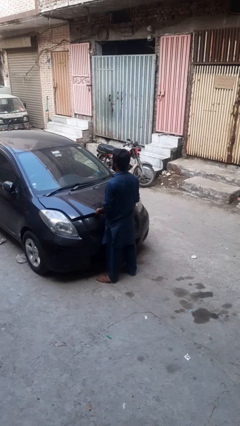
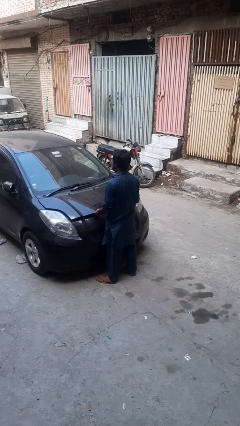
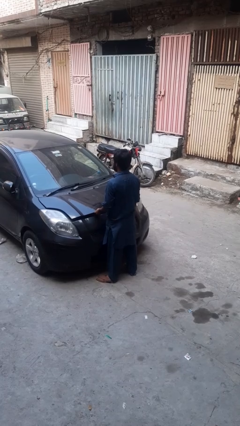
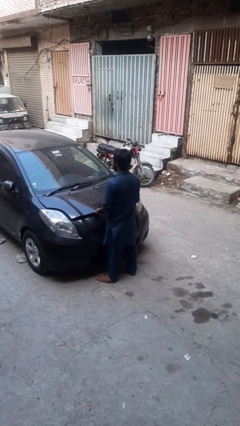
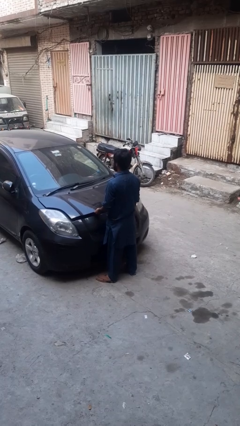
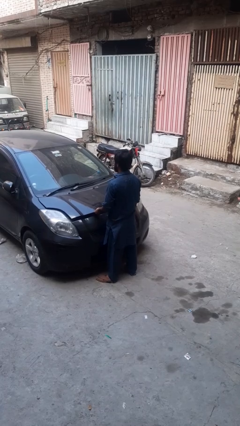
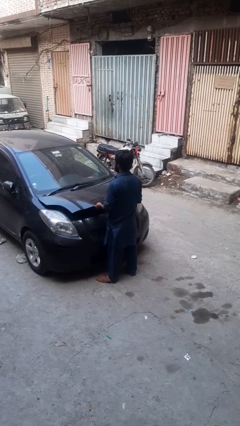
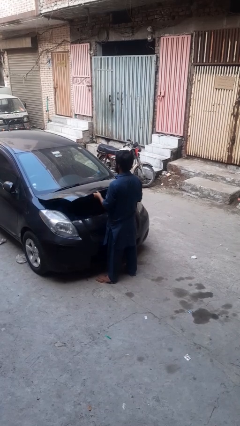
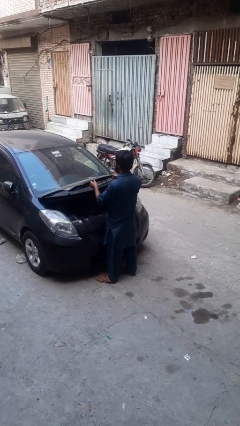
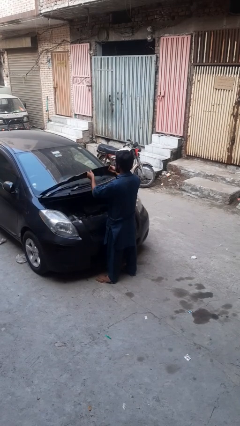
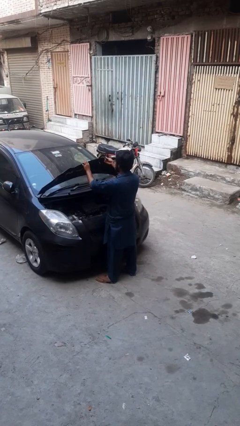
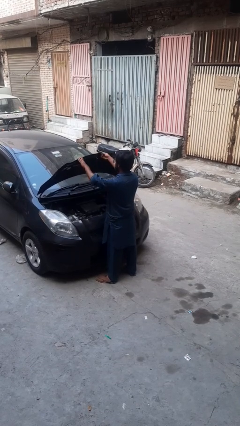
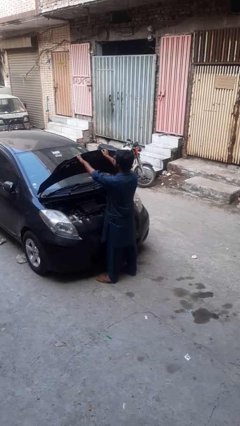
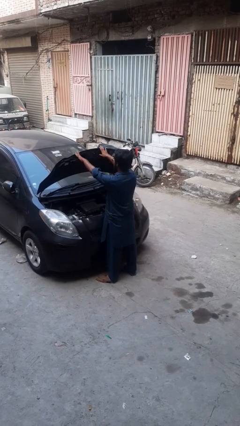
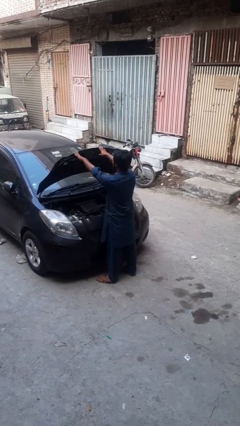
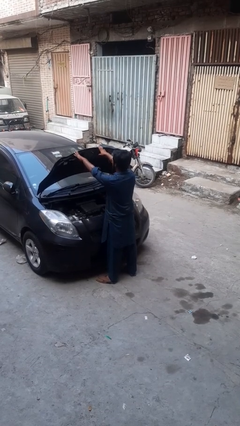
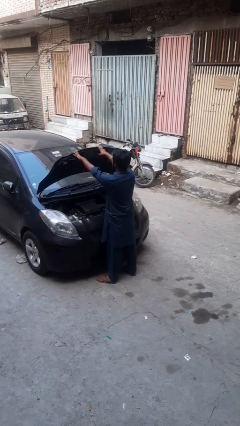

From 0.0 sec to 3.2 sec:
person opens car hood

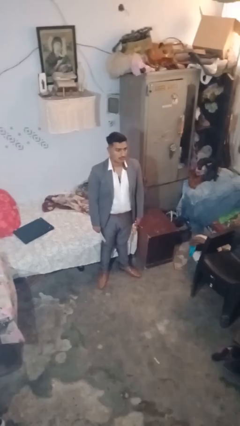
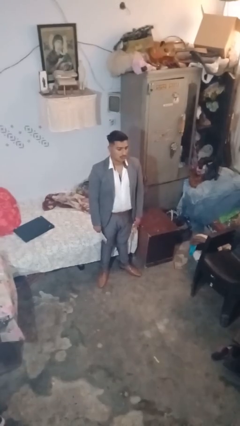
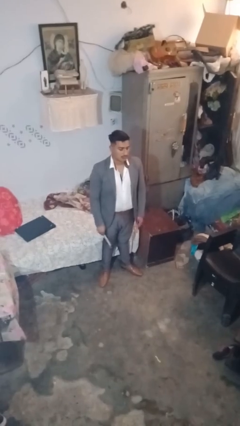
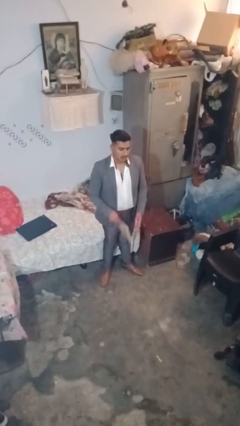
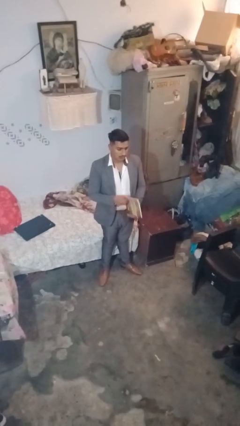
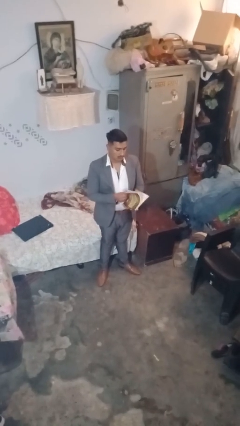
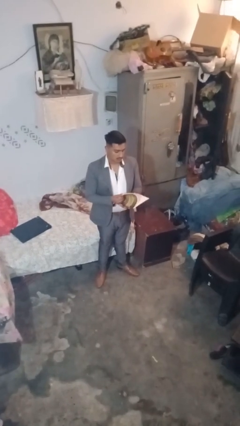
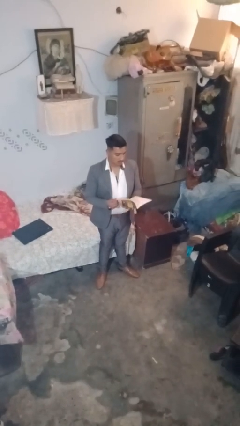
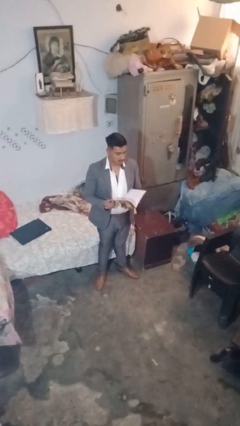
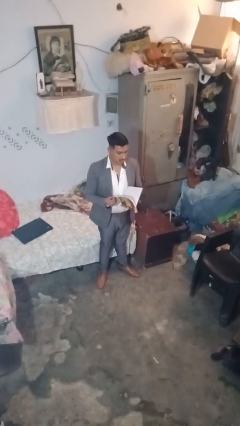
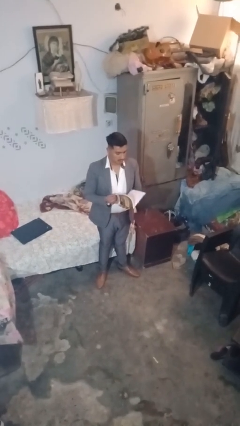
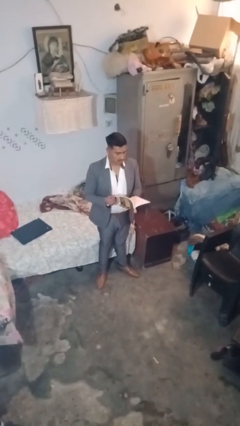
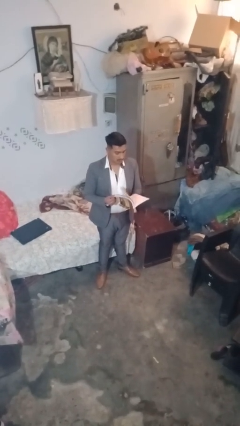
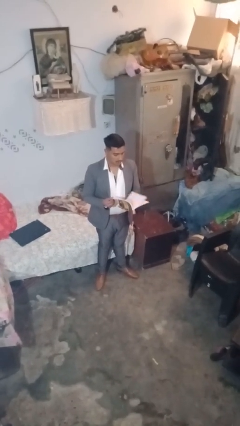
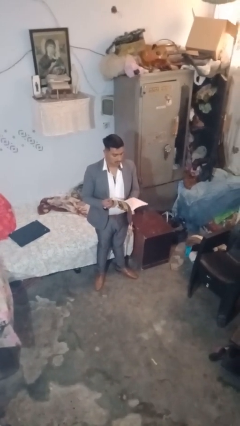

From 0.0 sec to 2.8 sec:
person reads document

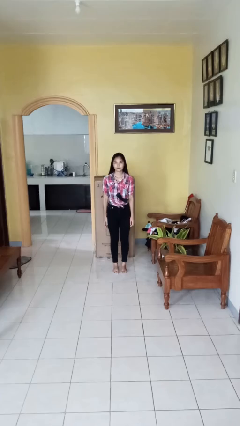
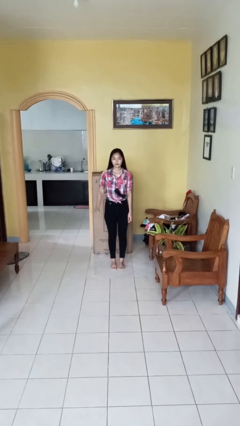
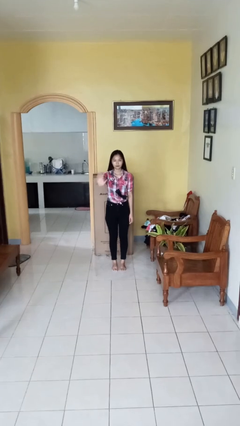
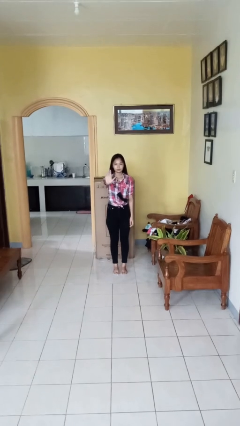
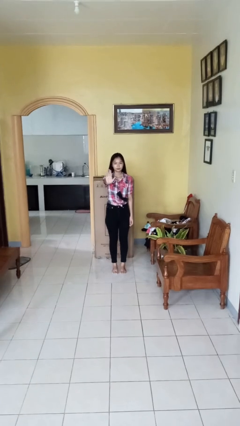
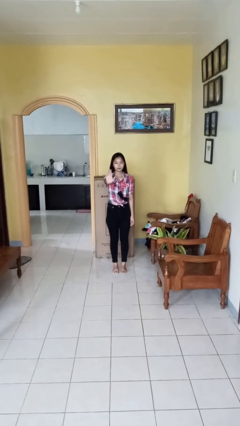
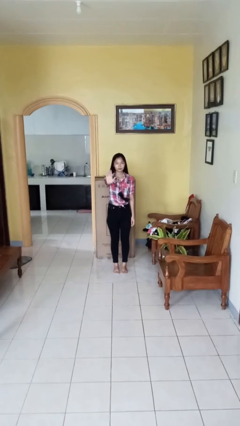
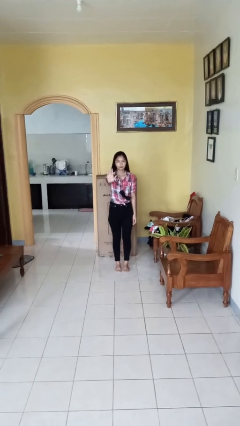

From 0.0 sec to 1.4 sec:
person gestures stop

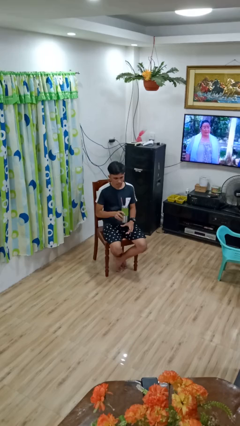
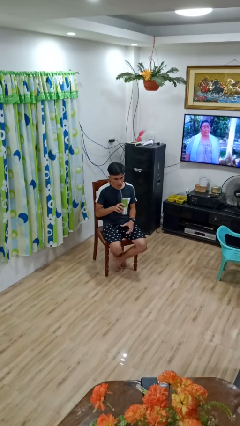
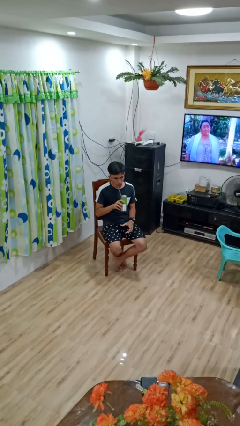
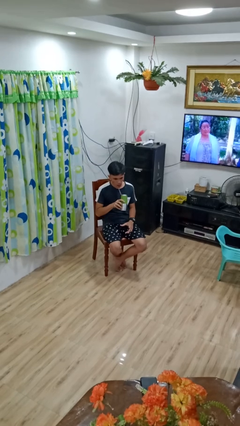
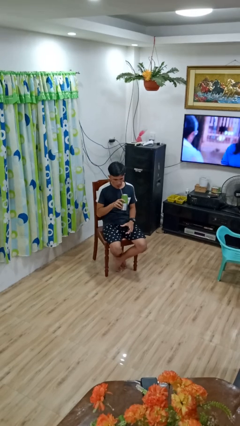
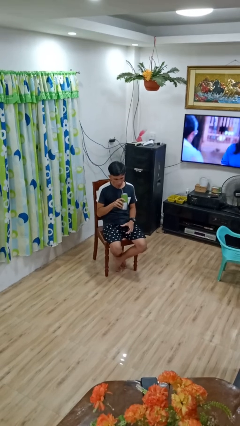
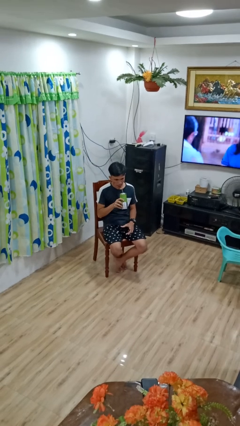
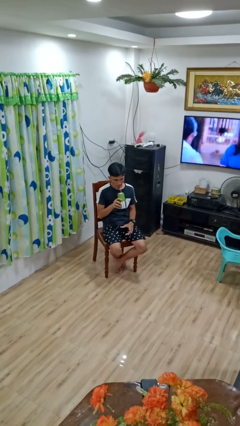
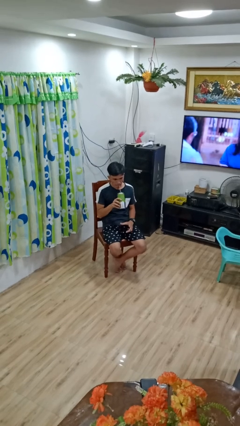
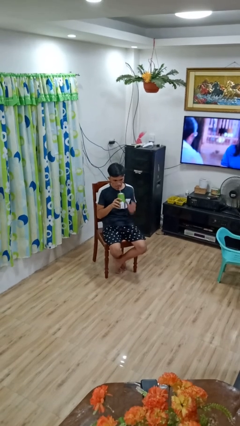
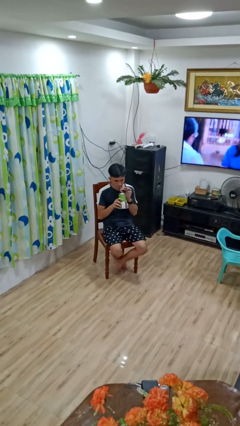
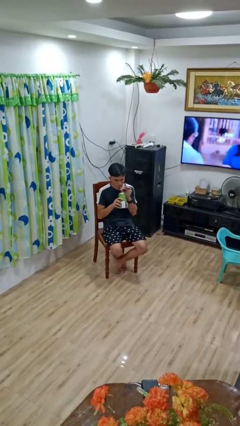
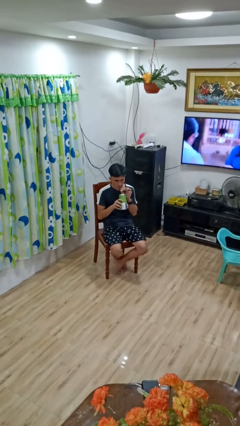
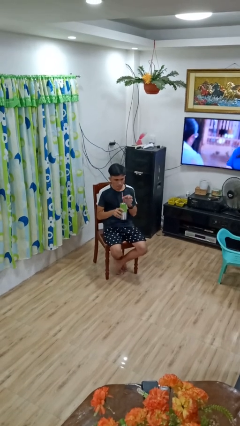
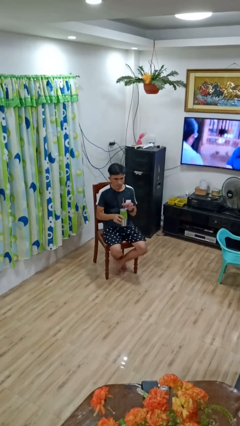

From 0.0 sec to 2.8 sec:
person drinks from straw

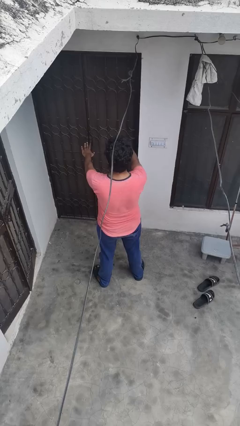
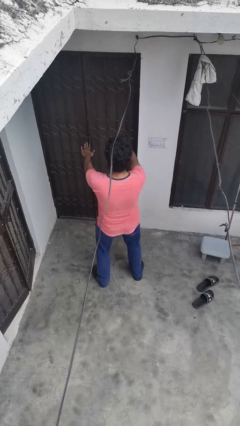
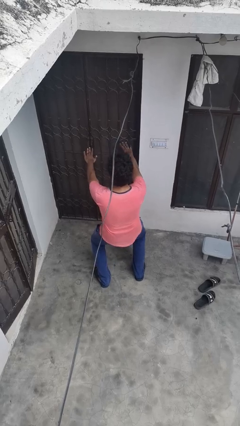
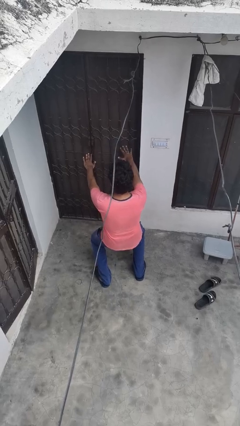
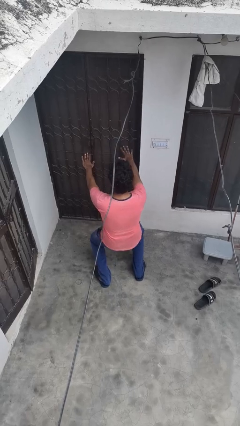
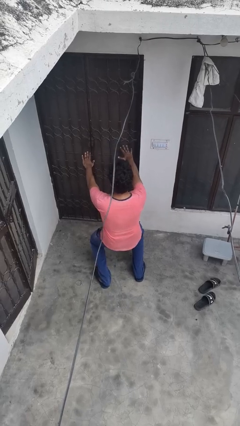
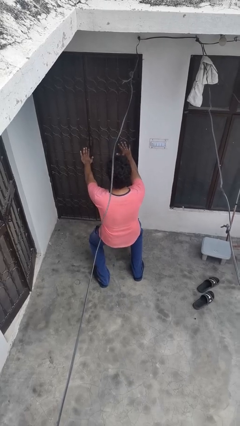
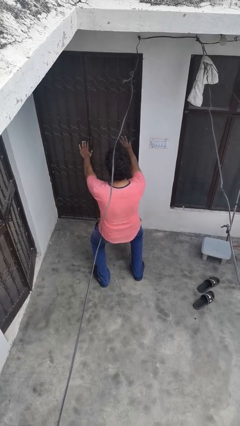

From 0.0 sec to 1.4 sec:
person squats

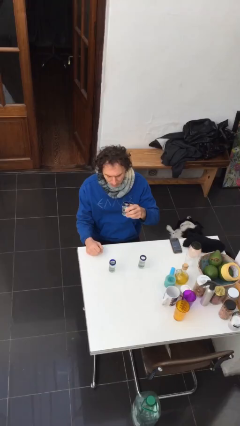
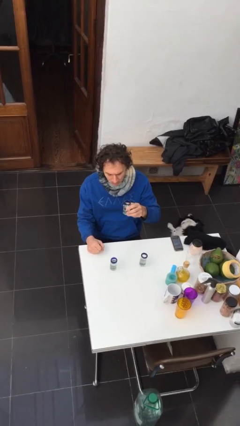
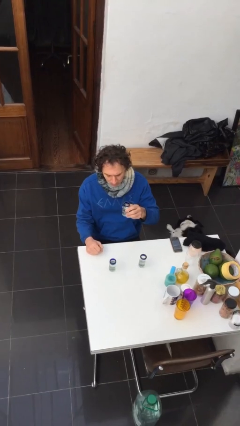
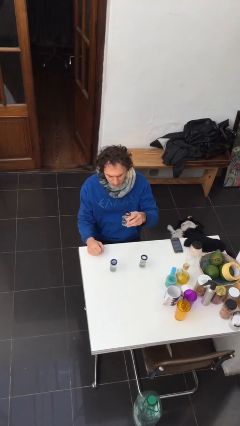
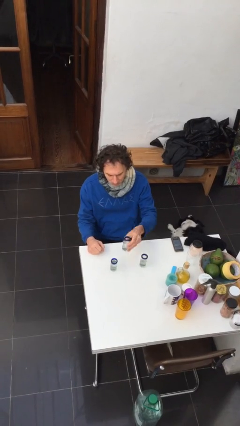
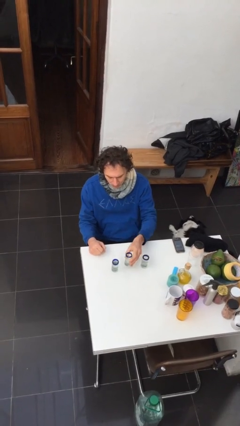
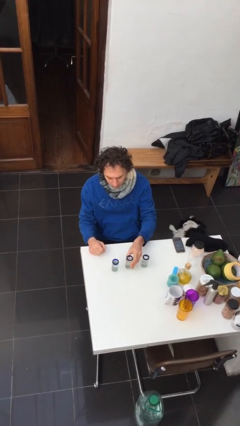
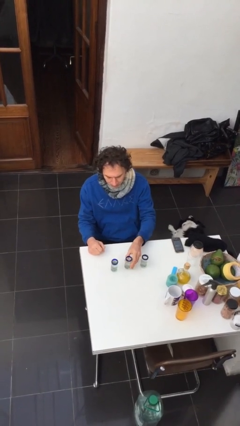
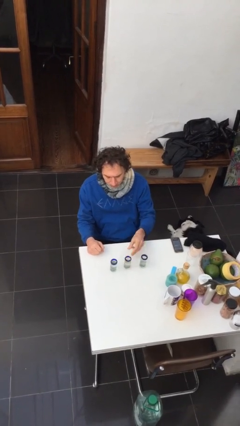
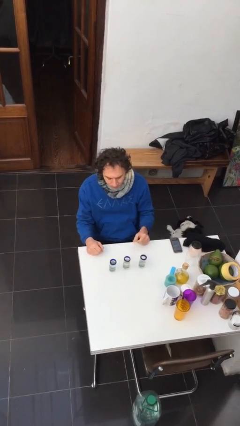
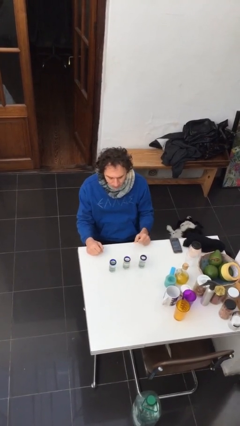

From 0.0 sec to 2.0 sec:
person puts down object on table

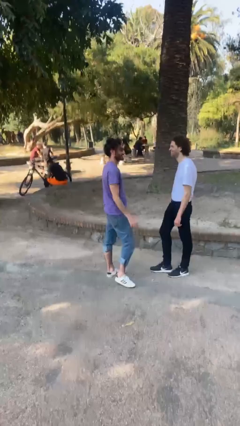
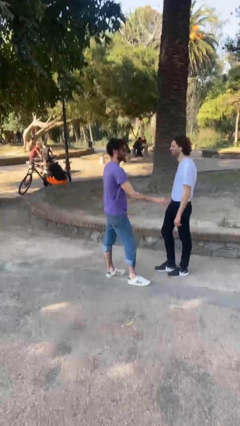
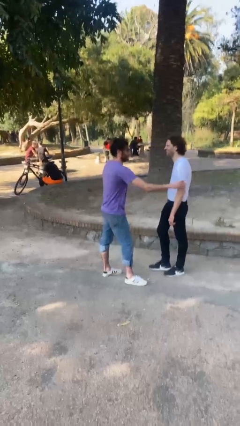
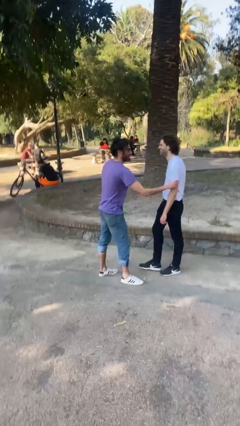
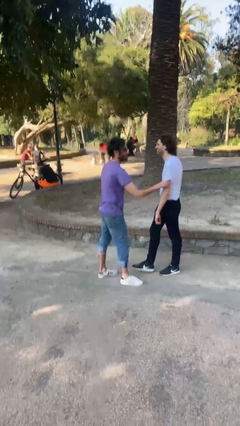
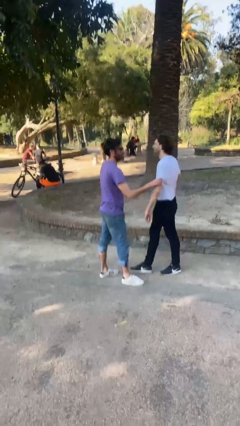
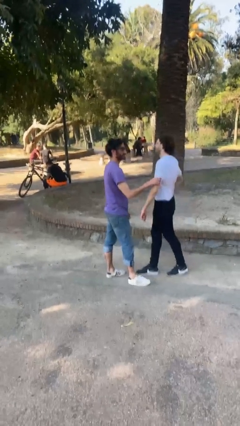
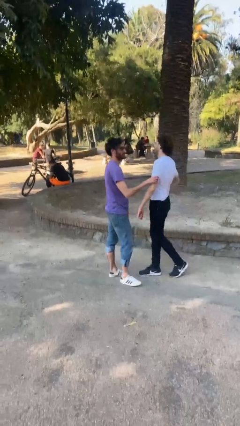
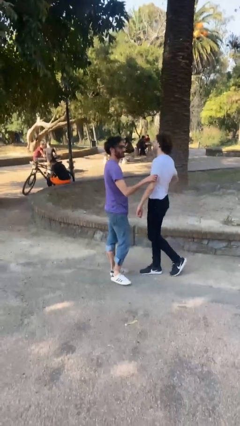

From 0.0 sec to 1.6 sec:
person grabs person by bicep

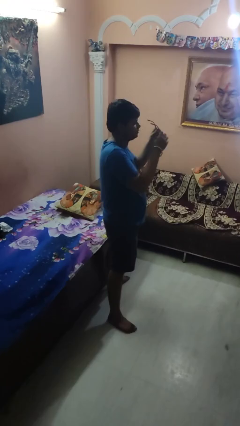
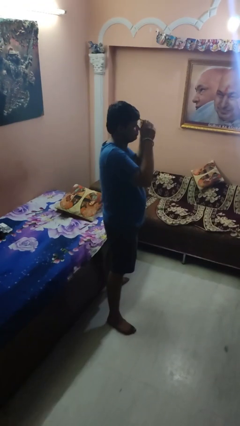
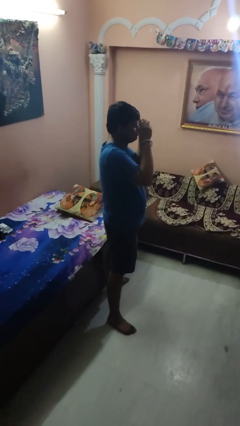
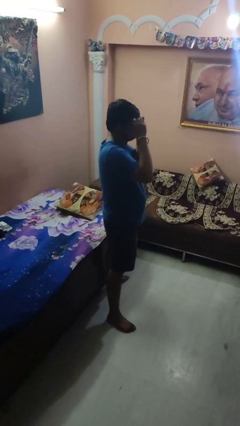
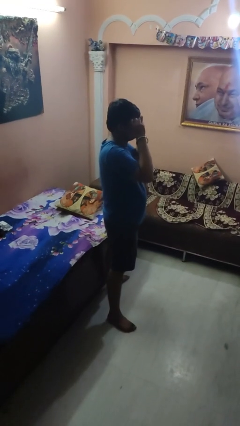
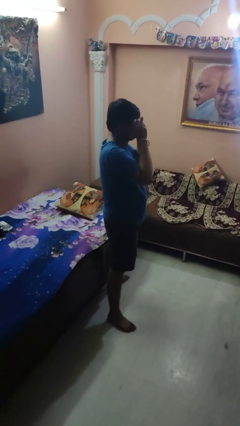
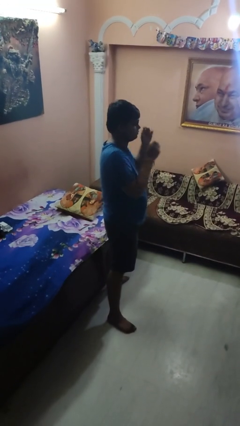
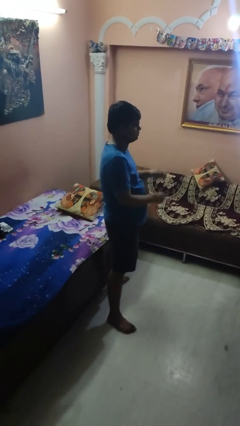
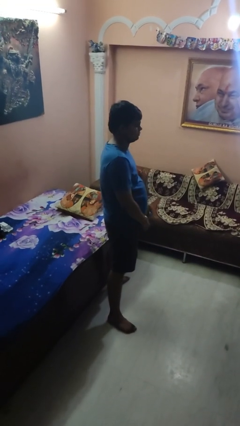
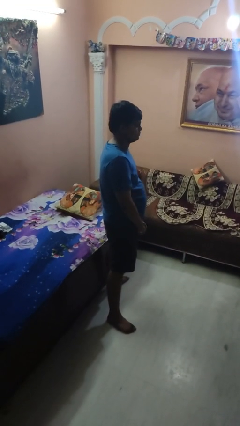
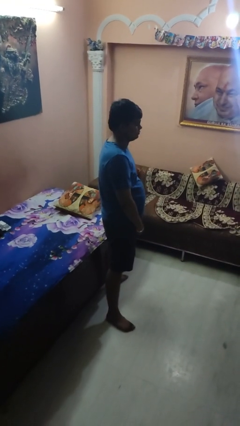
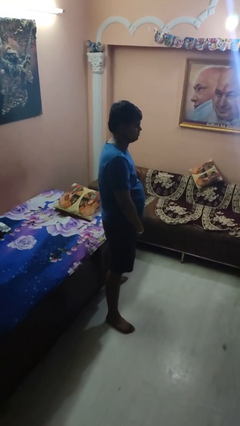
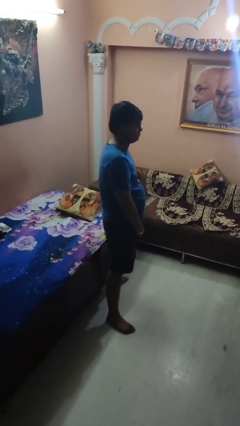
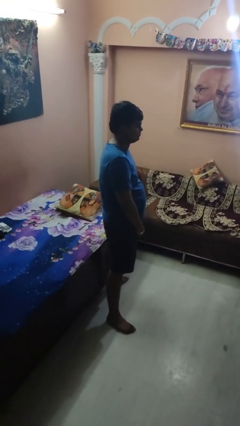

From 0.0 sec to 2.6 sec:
person puts on glasses
